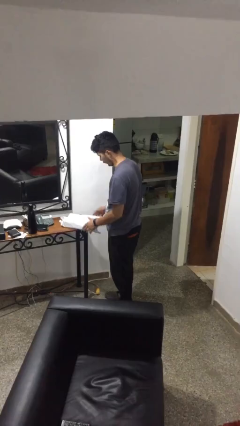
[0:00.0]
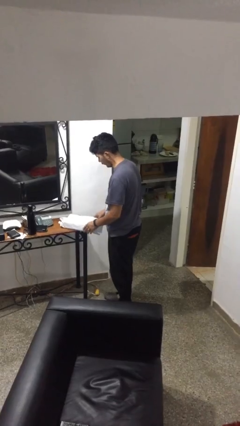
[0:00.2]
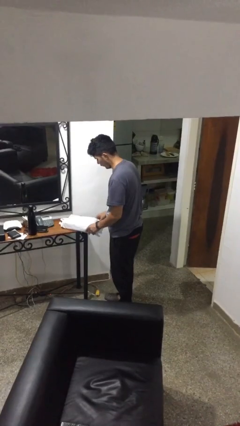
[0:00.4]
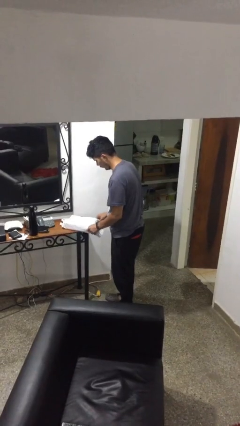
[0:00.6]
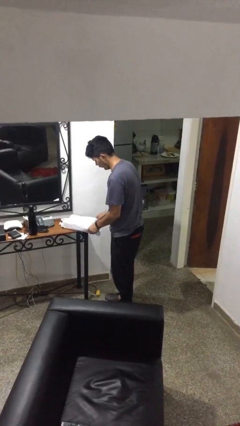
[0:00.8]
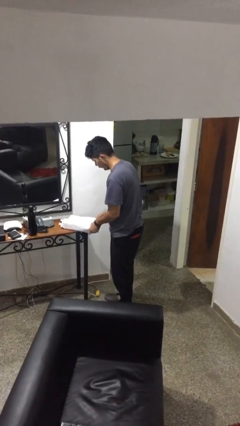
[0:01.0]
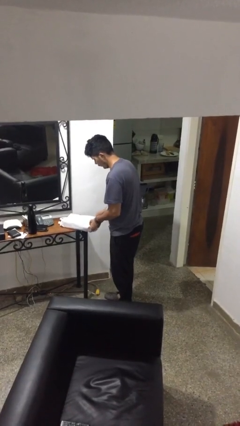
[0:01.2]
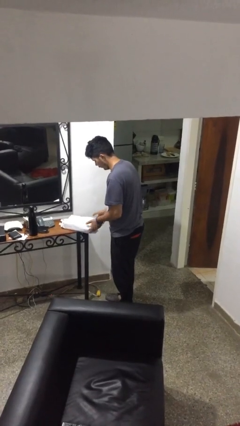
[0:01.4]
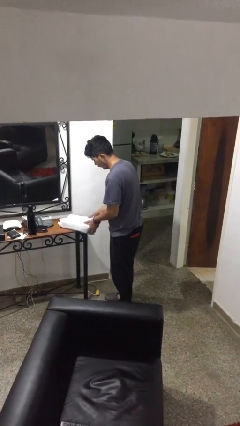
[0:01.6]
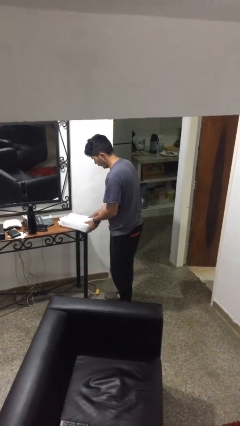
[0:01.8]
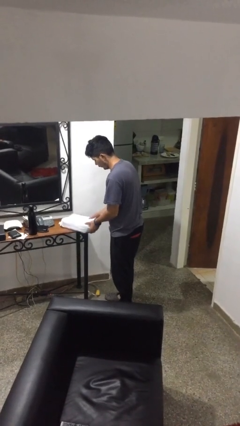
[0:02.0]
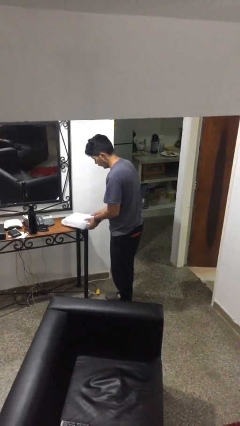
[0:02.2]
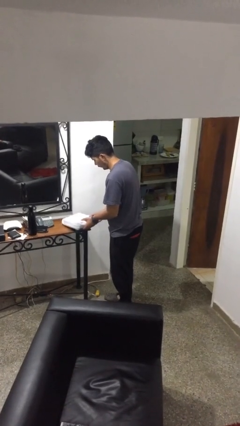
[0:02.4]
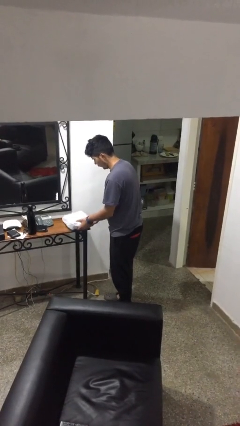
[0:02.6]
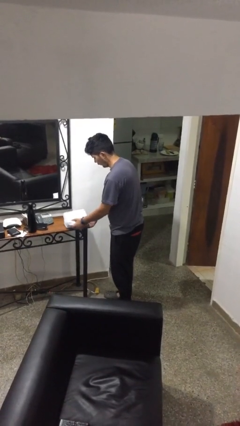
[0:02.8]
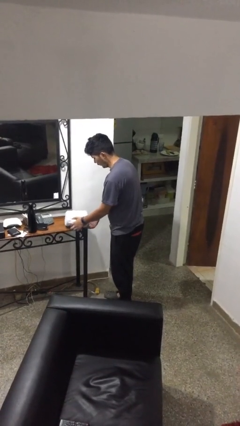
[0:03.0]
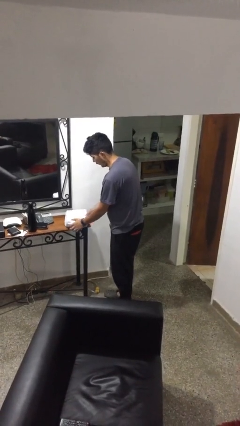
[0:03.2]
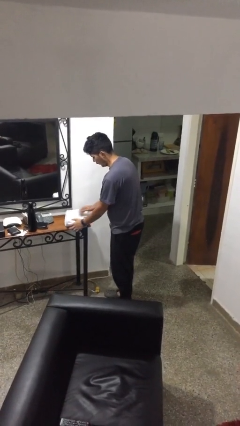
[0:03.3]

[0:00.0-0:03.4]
person wraps box

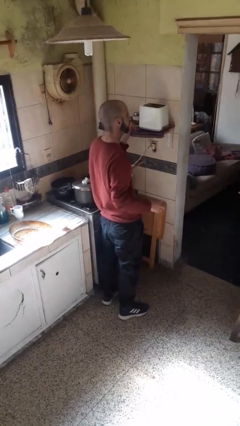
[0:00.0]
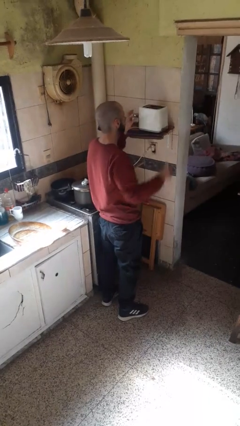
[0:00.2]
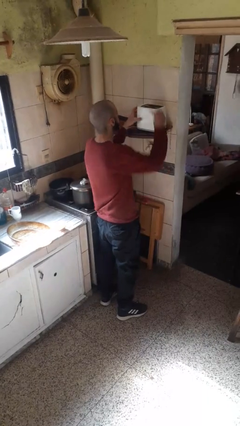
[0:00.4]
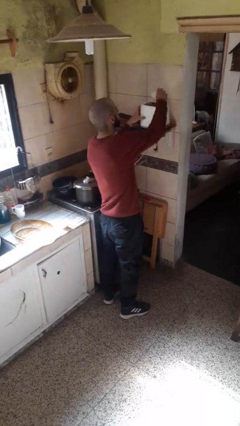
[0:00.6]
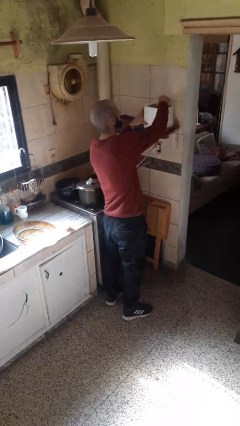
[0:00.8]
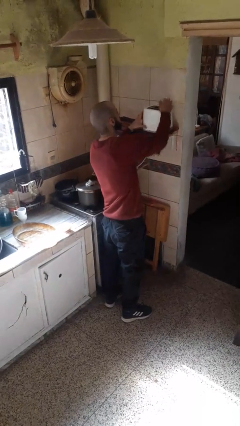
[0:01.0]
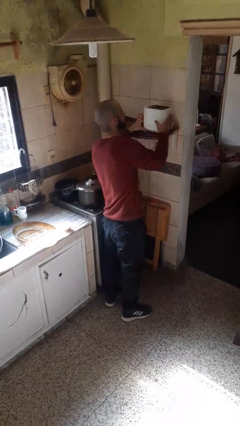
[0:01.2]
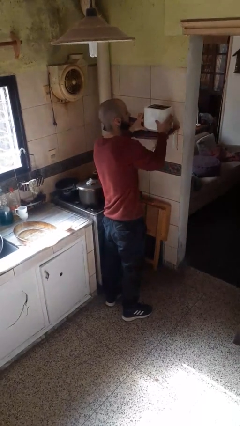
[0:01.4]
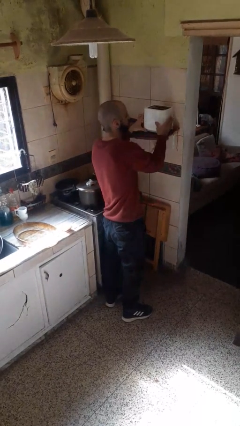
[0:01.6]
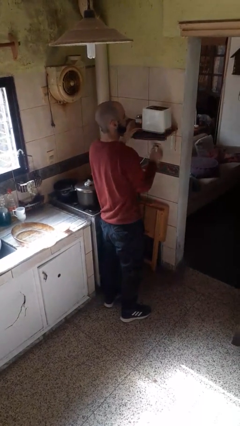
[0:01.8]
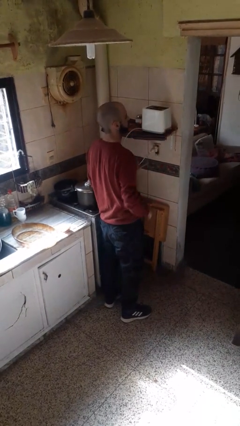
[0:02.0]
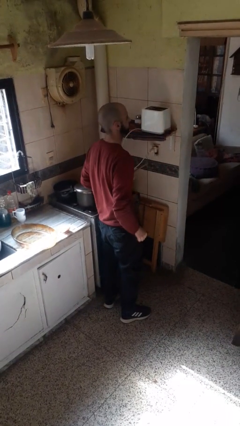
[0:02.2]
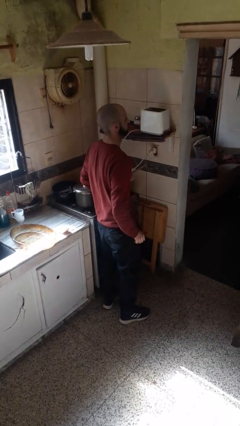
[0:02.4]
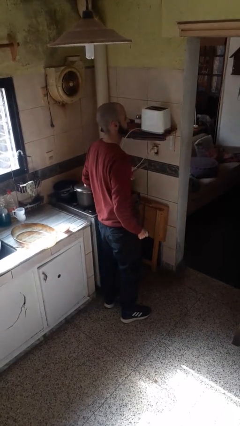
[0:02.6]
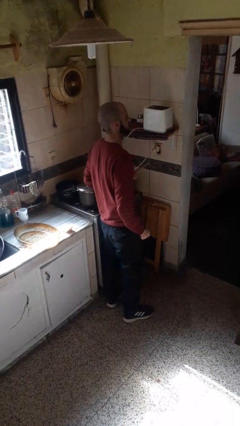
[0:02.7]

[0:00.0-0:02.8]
person puts object into toaster

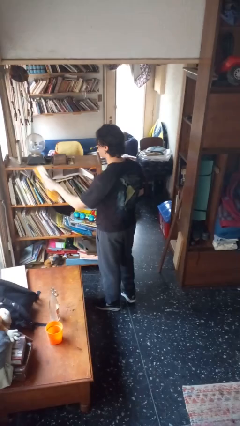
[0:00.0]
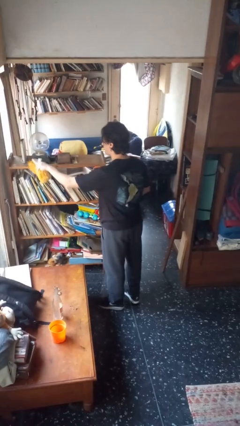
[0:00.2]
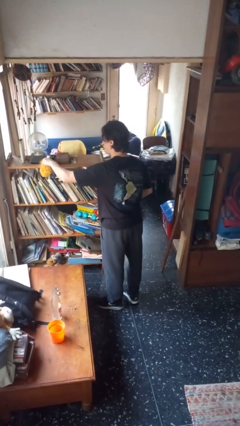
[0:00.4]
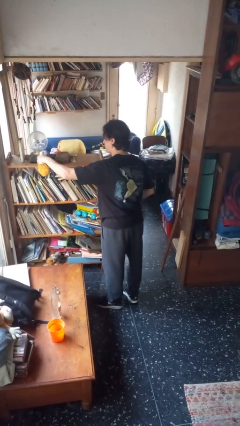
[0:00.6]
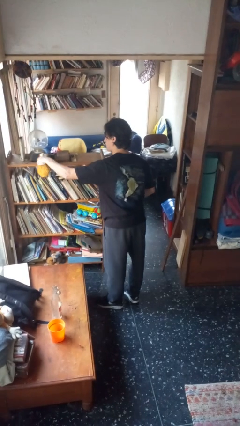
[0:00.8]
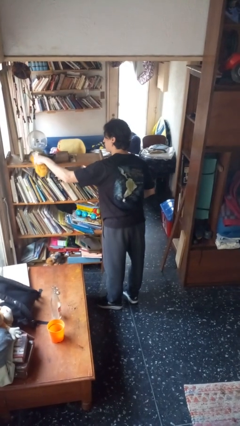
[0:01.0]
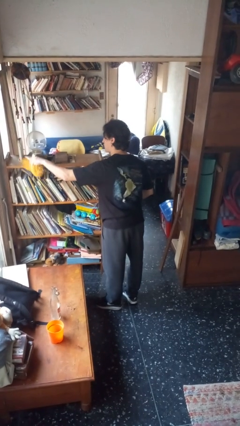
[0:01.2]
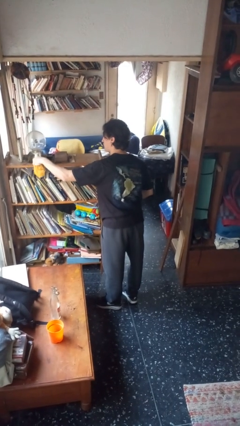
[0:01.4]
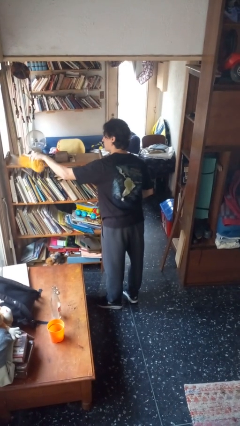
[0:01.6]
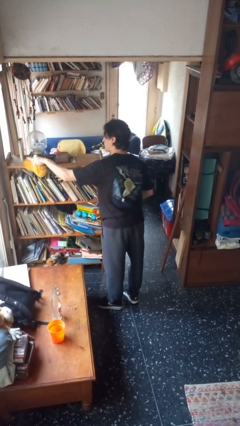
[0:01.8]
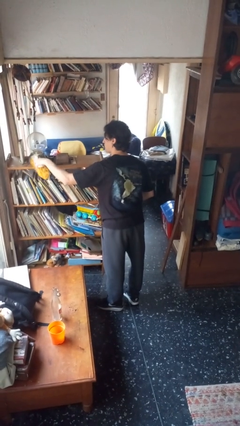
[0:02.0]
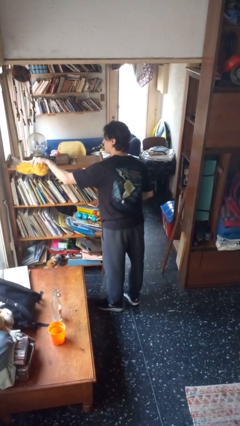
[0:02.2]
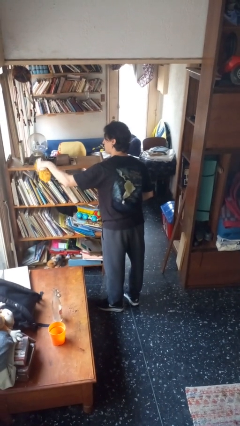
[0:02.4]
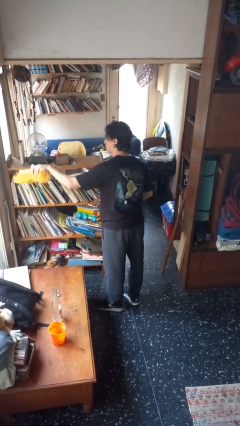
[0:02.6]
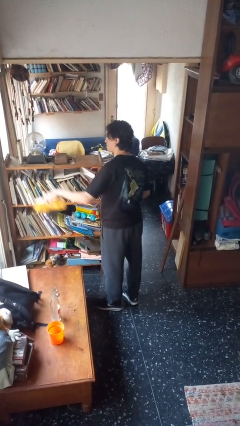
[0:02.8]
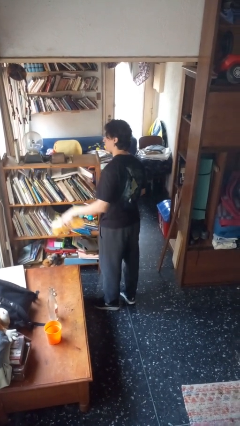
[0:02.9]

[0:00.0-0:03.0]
person dusts furniture

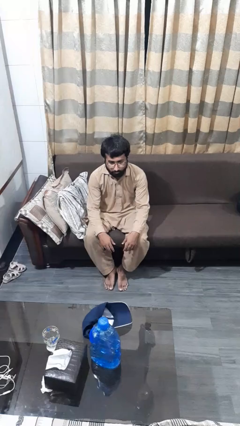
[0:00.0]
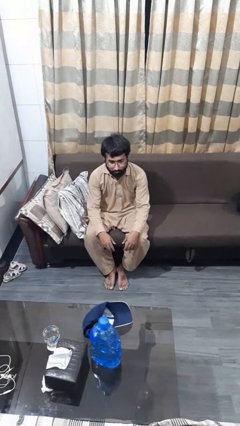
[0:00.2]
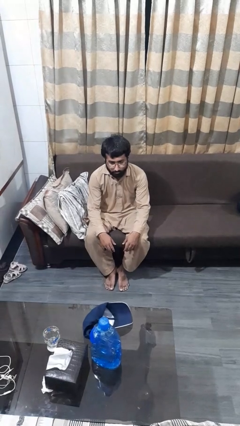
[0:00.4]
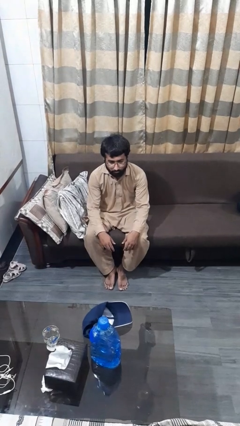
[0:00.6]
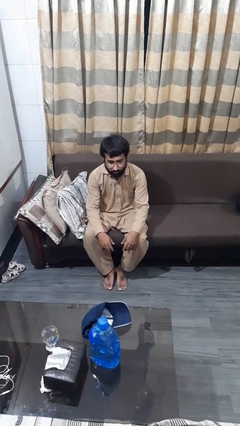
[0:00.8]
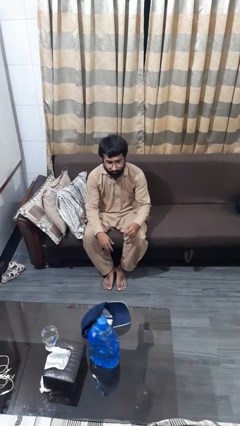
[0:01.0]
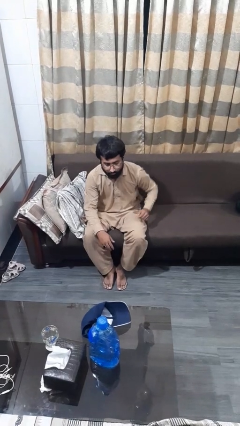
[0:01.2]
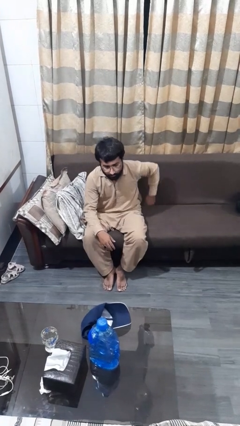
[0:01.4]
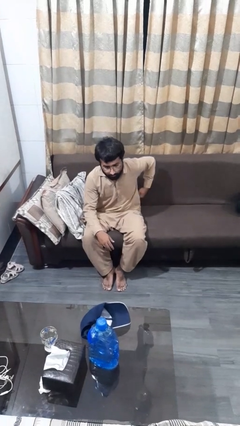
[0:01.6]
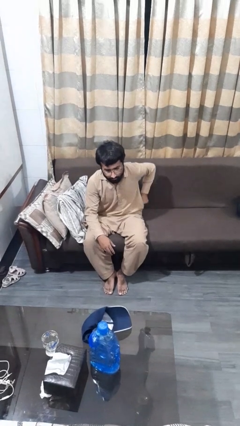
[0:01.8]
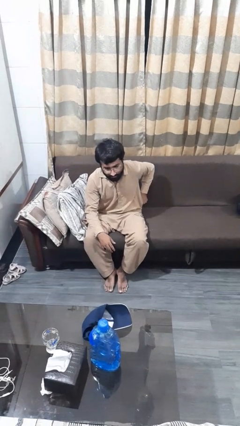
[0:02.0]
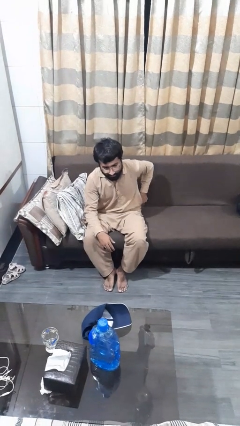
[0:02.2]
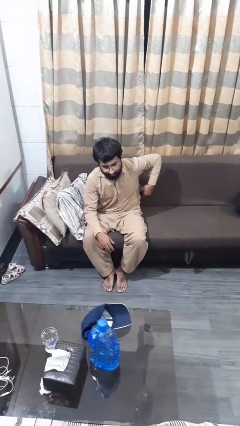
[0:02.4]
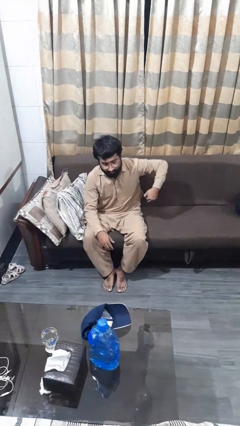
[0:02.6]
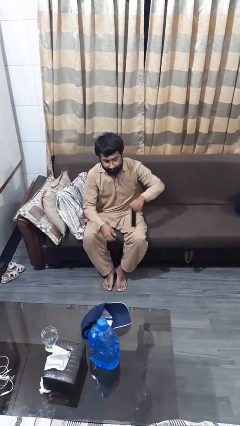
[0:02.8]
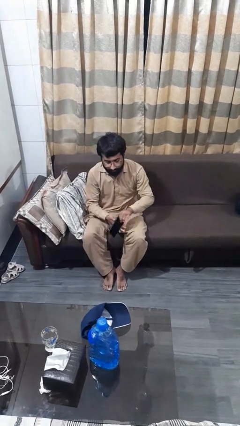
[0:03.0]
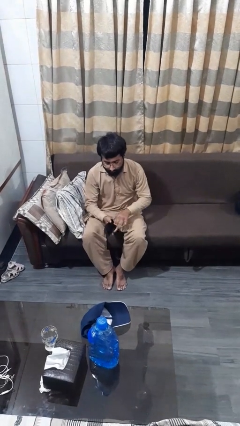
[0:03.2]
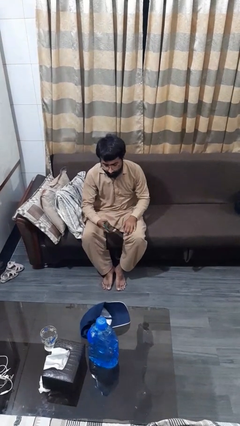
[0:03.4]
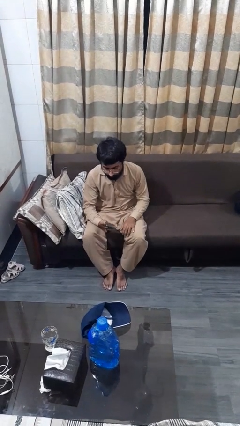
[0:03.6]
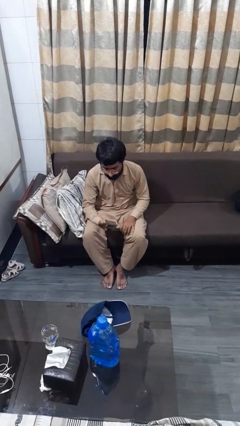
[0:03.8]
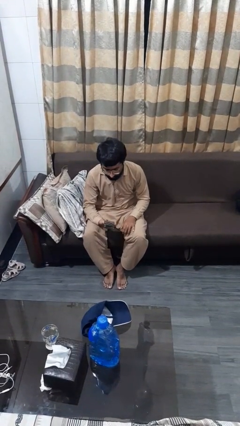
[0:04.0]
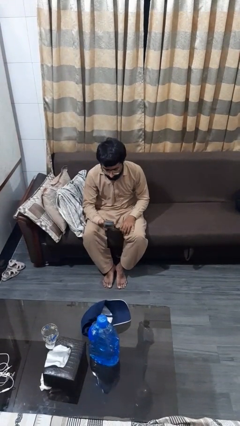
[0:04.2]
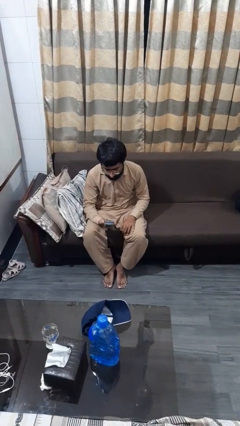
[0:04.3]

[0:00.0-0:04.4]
person takes phone from pocket

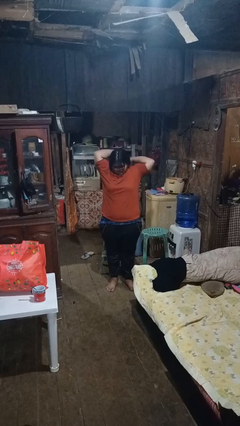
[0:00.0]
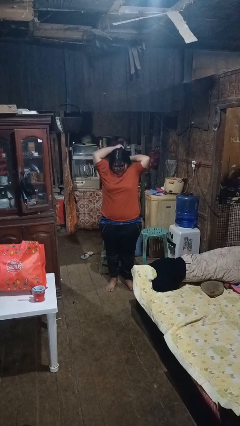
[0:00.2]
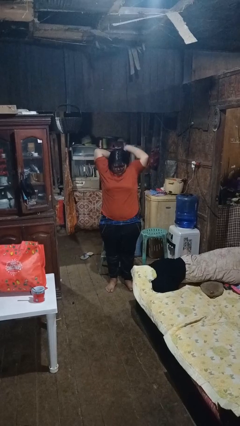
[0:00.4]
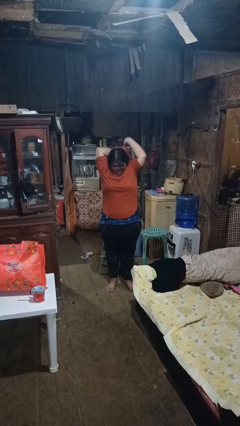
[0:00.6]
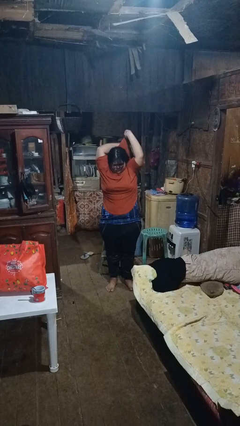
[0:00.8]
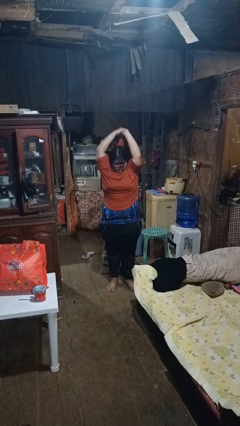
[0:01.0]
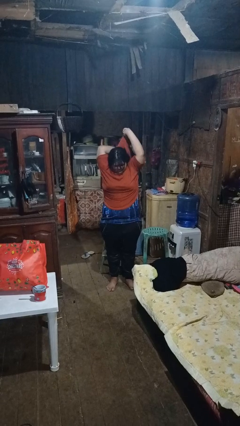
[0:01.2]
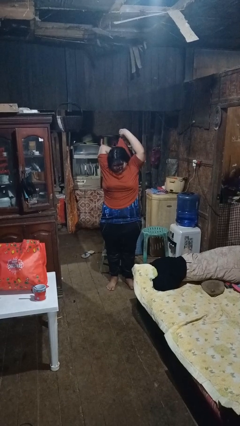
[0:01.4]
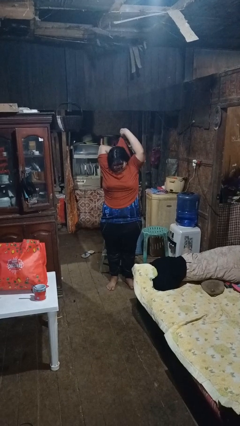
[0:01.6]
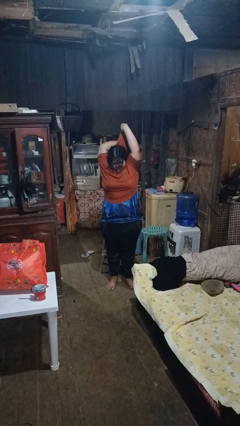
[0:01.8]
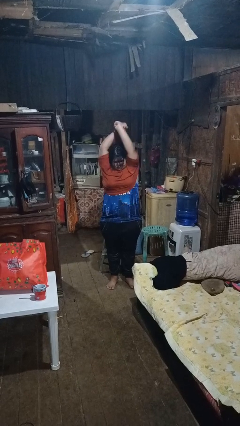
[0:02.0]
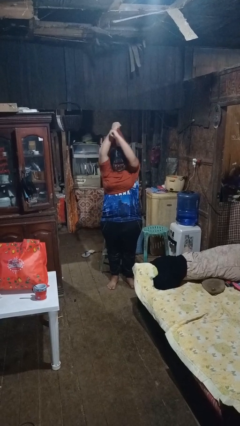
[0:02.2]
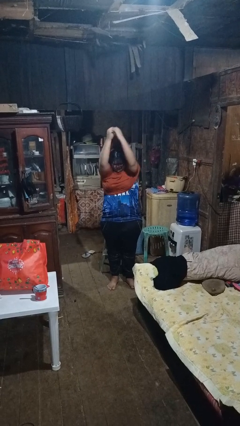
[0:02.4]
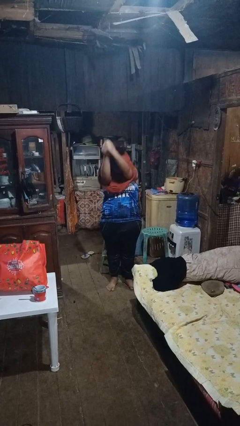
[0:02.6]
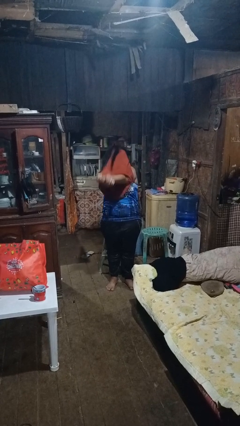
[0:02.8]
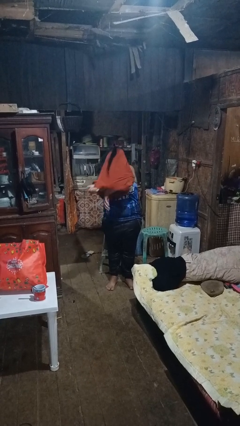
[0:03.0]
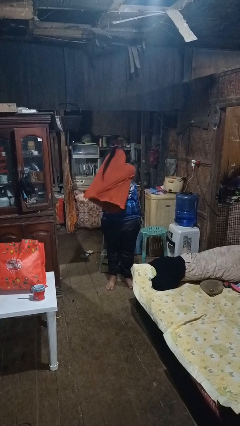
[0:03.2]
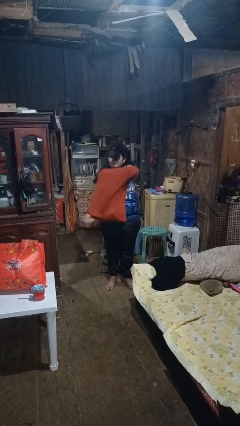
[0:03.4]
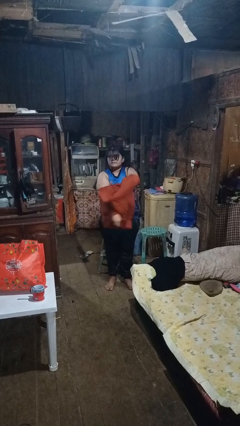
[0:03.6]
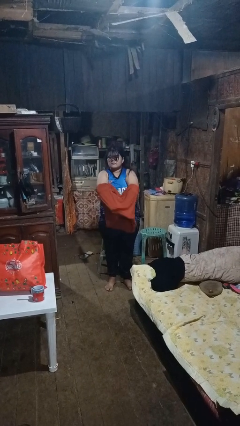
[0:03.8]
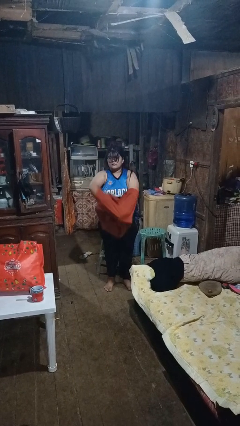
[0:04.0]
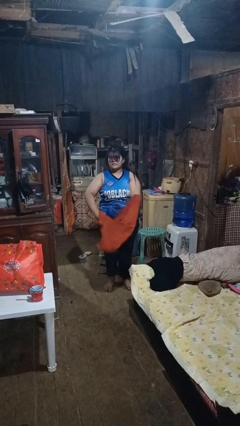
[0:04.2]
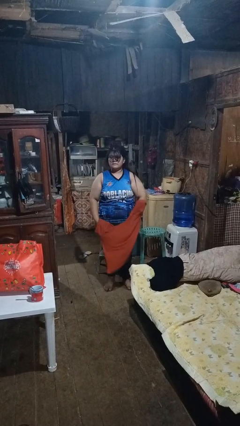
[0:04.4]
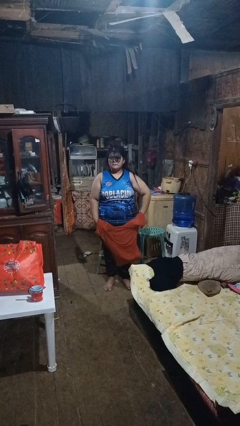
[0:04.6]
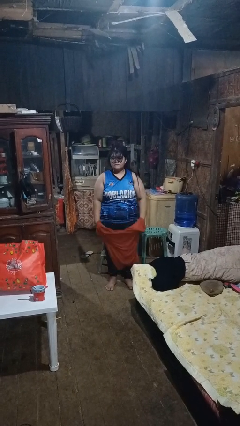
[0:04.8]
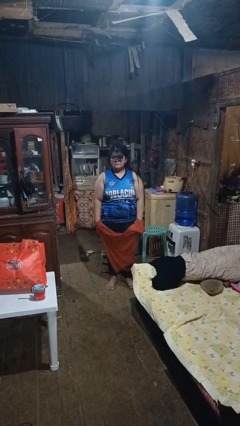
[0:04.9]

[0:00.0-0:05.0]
person takes off shirt
